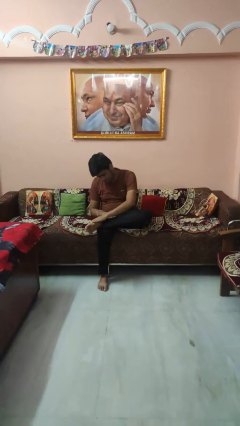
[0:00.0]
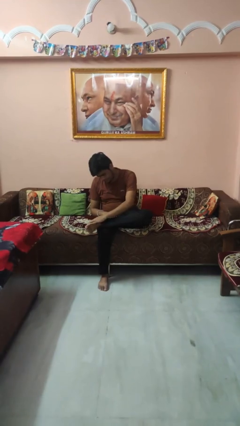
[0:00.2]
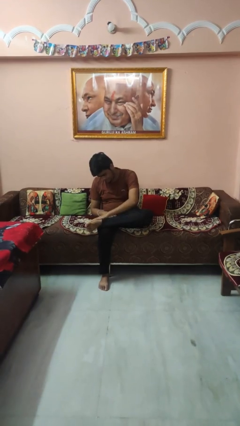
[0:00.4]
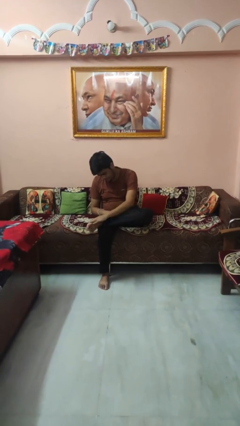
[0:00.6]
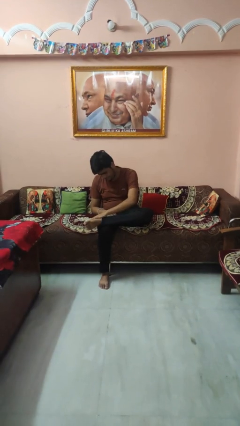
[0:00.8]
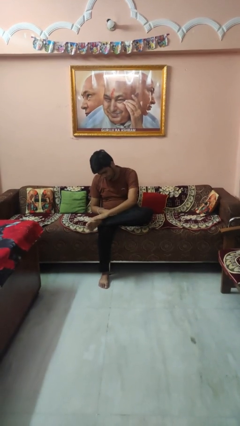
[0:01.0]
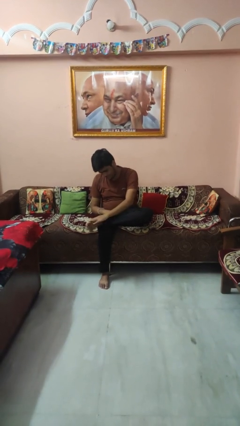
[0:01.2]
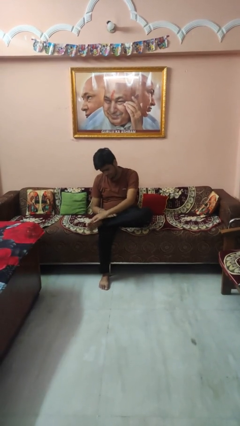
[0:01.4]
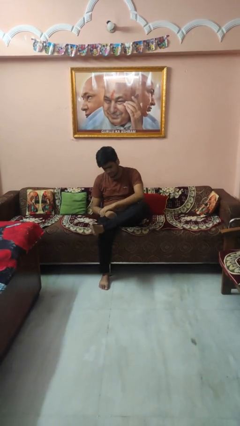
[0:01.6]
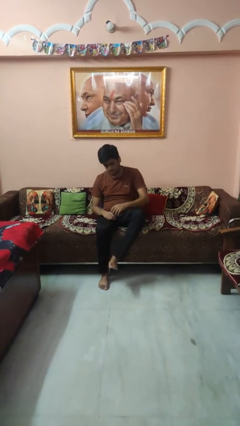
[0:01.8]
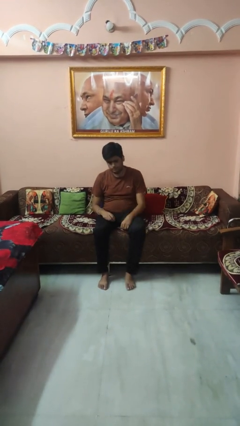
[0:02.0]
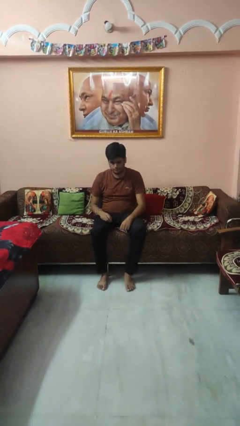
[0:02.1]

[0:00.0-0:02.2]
person rubs foot

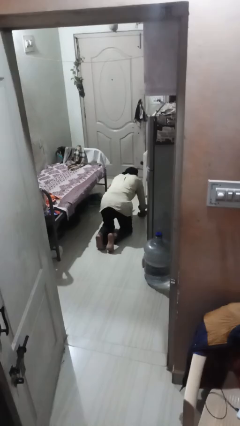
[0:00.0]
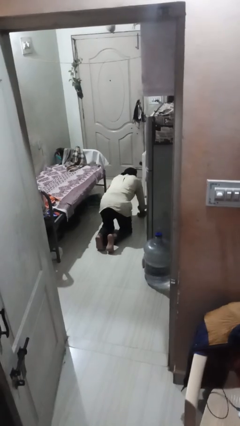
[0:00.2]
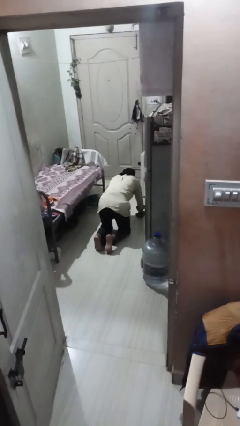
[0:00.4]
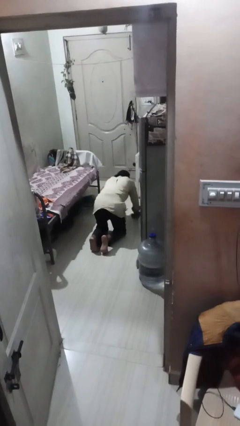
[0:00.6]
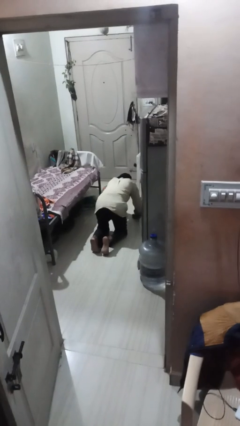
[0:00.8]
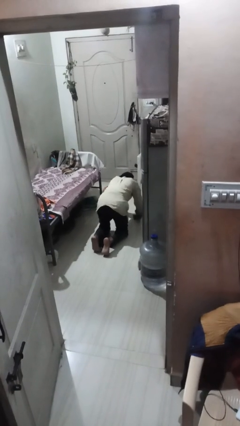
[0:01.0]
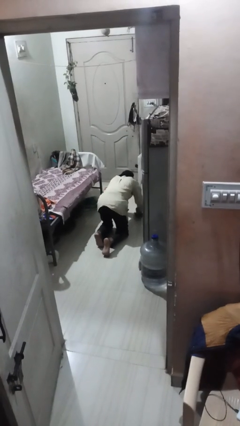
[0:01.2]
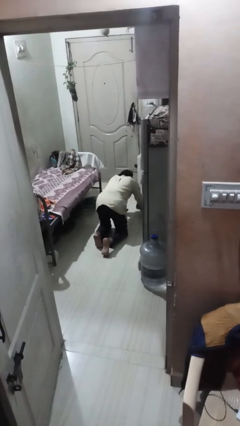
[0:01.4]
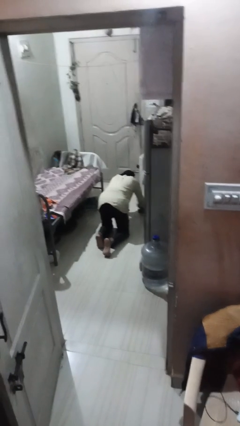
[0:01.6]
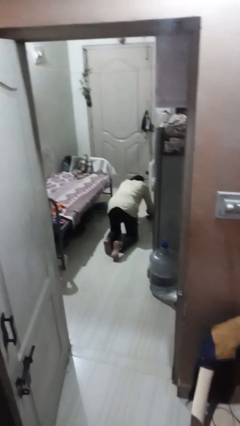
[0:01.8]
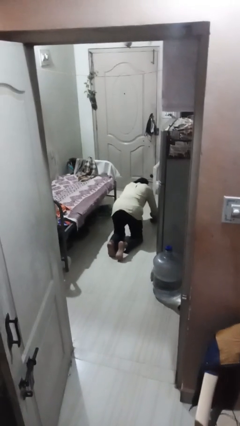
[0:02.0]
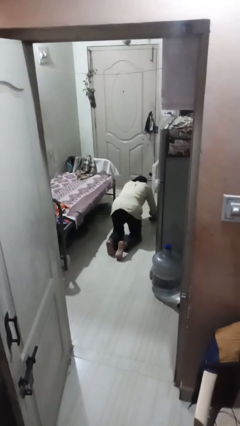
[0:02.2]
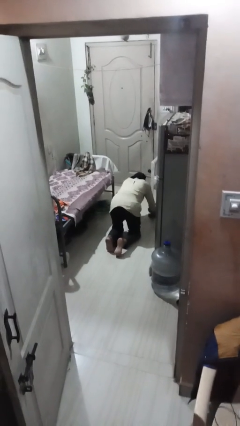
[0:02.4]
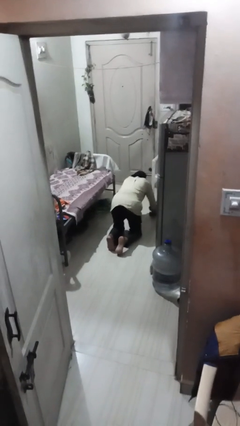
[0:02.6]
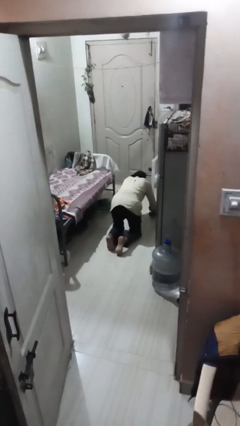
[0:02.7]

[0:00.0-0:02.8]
person crawls

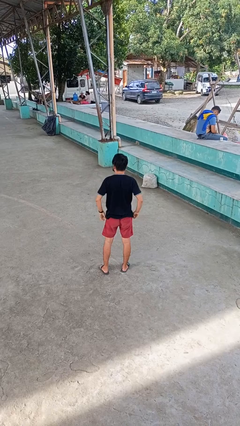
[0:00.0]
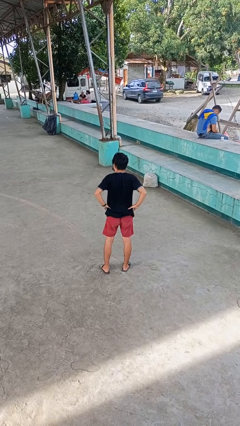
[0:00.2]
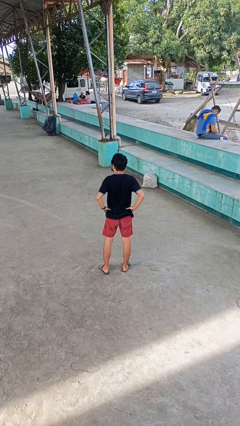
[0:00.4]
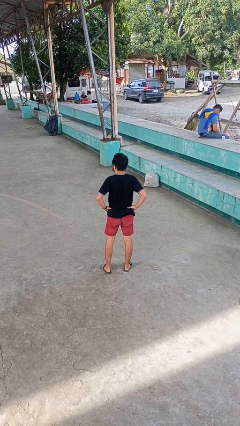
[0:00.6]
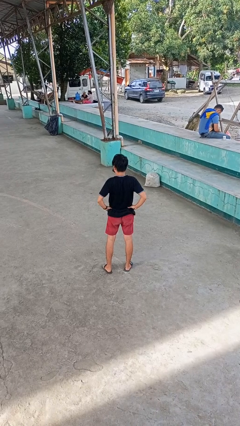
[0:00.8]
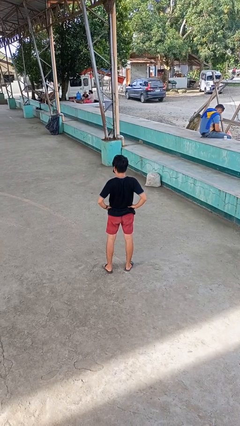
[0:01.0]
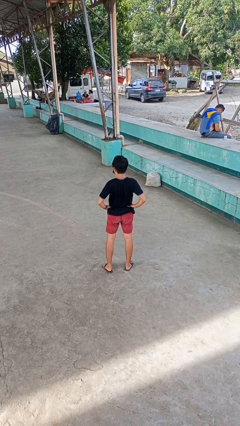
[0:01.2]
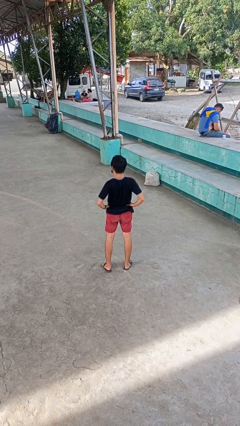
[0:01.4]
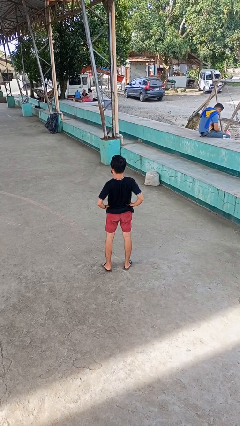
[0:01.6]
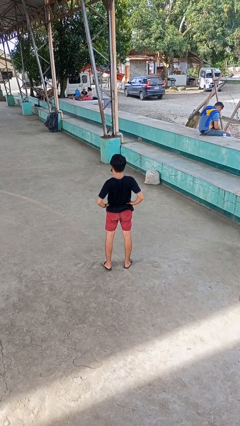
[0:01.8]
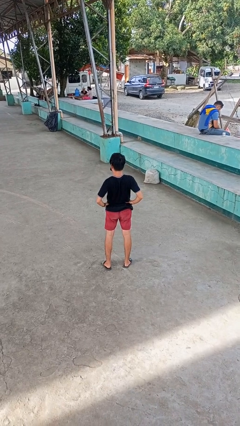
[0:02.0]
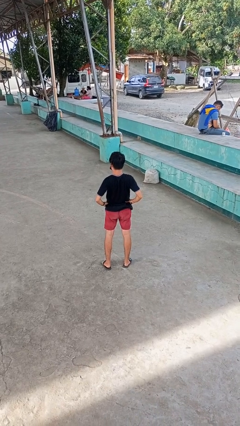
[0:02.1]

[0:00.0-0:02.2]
person stretches back

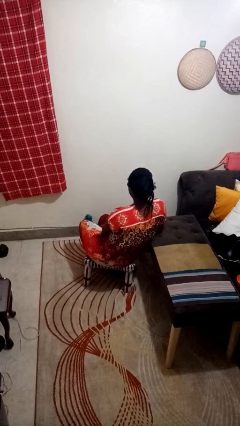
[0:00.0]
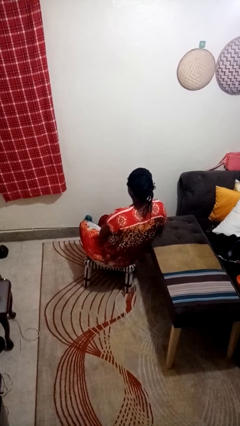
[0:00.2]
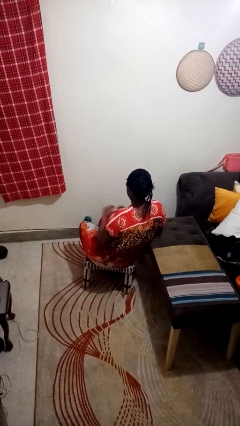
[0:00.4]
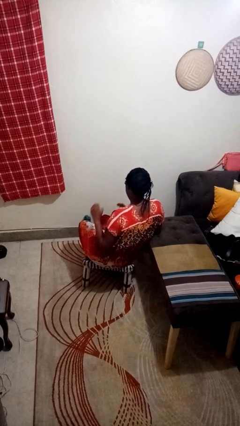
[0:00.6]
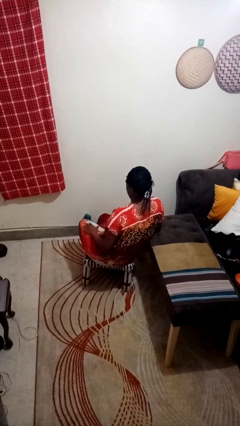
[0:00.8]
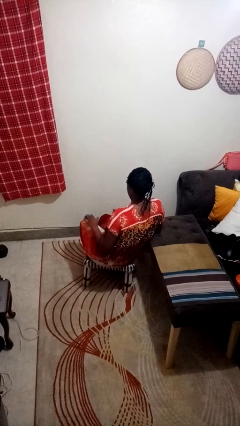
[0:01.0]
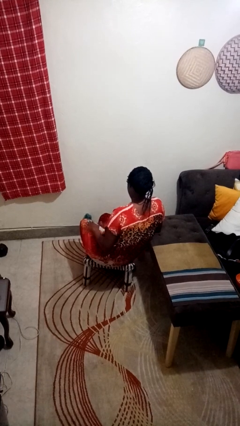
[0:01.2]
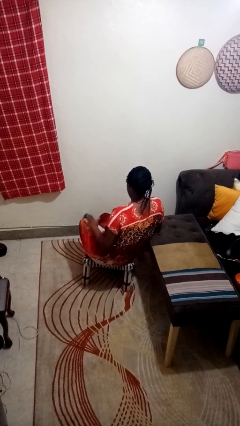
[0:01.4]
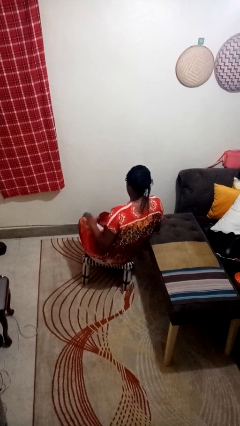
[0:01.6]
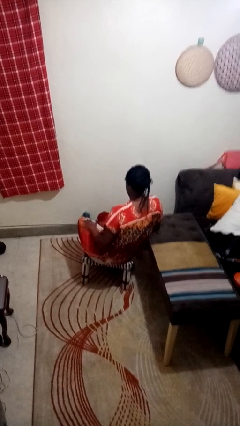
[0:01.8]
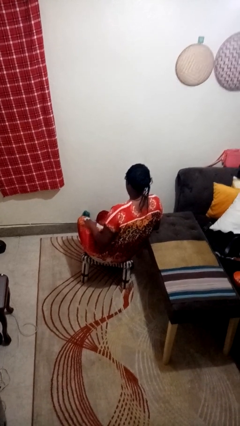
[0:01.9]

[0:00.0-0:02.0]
person slaps hands on thighs

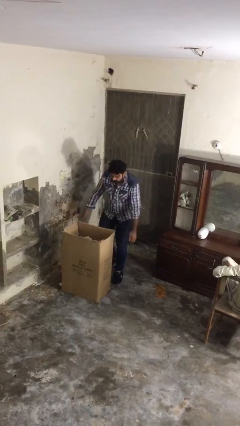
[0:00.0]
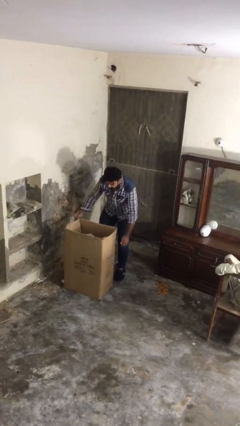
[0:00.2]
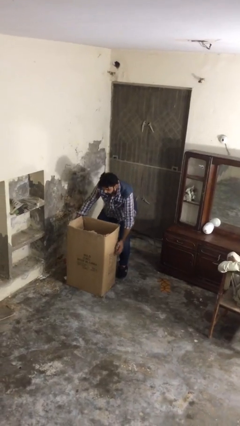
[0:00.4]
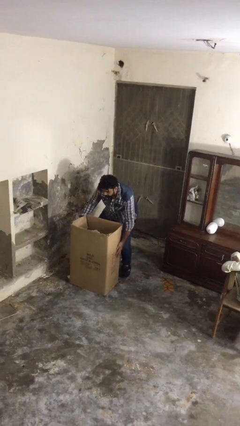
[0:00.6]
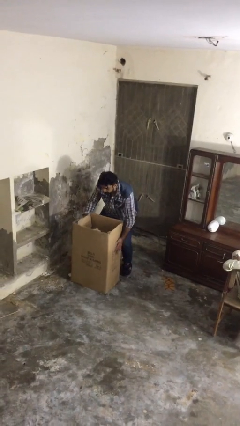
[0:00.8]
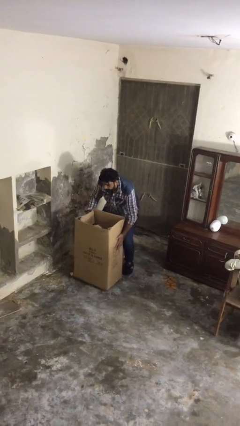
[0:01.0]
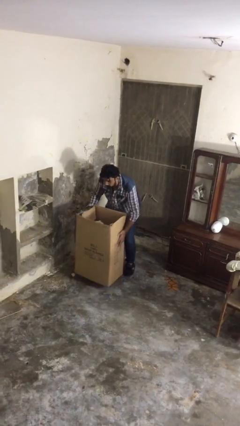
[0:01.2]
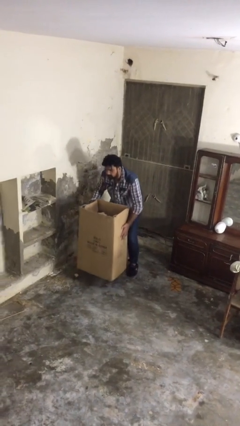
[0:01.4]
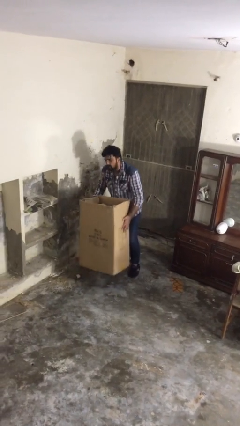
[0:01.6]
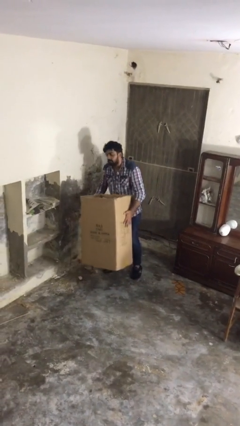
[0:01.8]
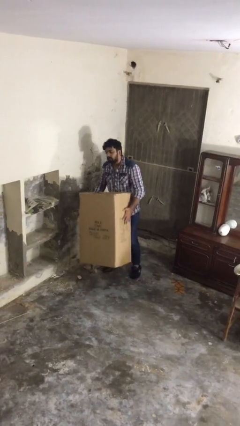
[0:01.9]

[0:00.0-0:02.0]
person picks up object from floor

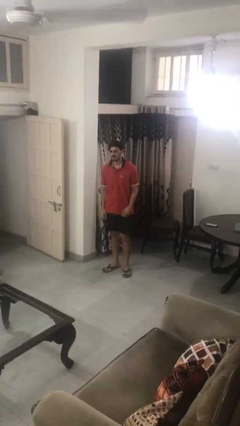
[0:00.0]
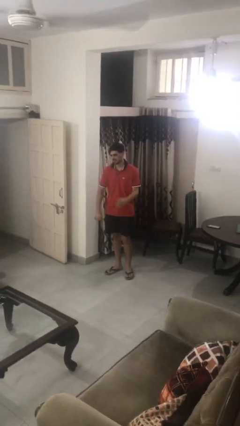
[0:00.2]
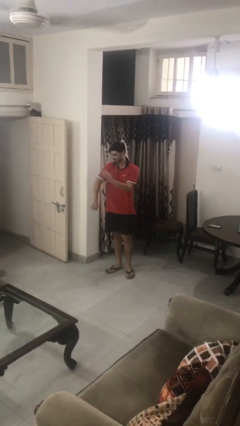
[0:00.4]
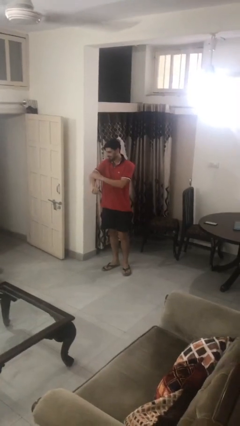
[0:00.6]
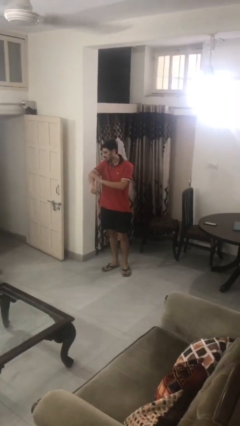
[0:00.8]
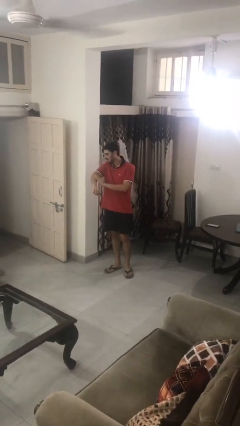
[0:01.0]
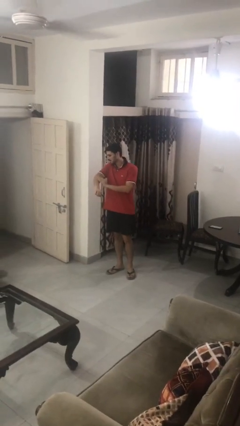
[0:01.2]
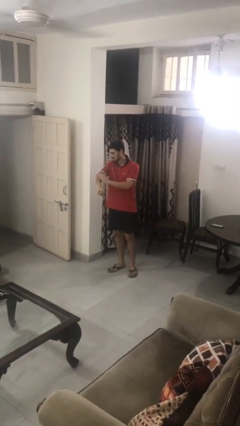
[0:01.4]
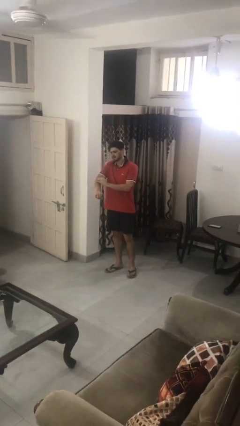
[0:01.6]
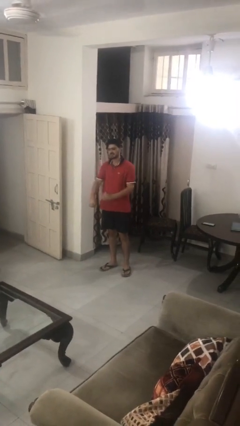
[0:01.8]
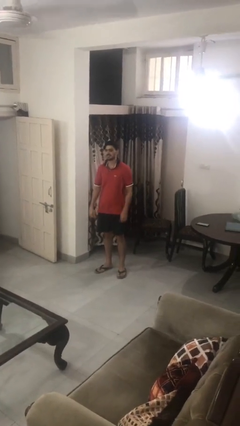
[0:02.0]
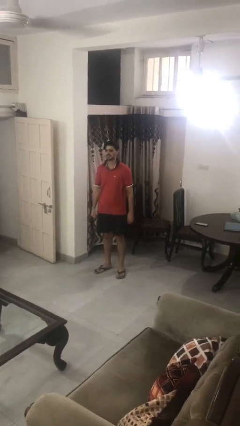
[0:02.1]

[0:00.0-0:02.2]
person swats bug

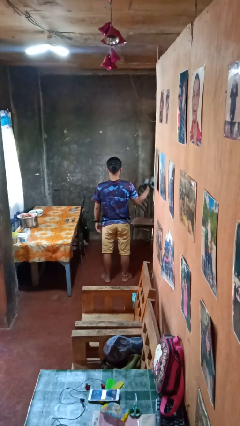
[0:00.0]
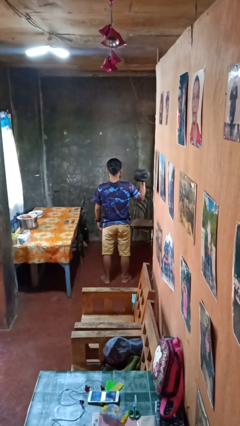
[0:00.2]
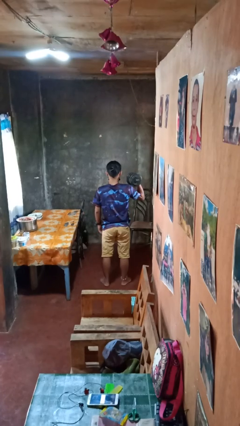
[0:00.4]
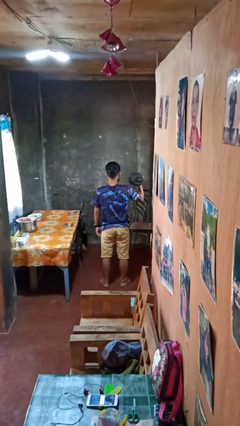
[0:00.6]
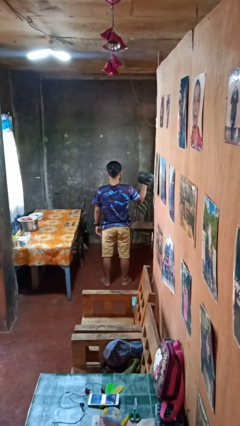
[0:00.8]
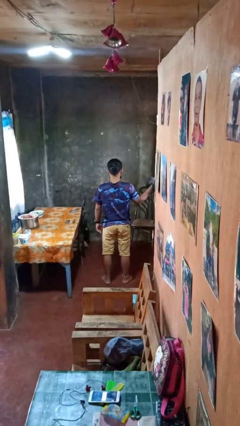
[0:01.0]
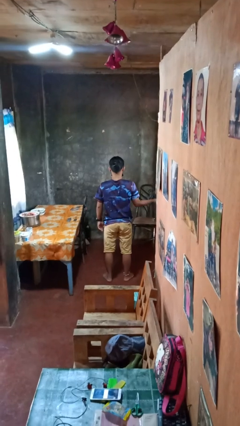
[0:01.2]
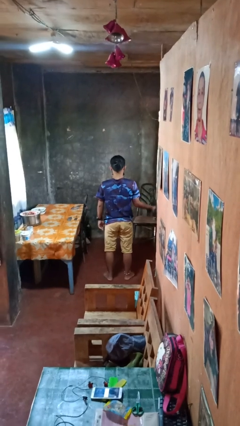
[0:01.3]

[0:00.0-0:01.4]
person lifts dumbbells

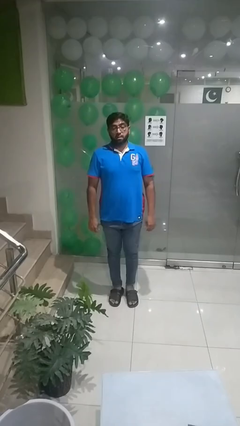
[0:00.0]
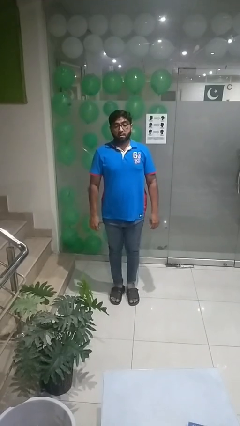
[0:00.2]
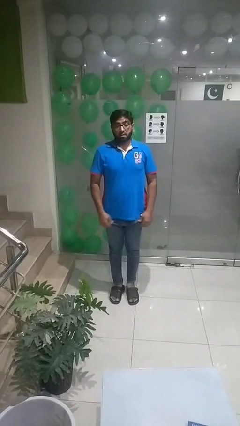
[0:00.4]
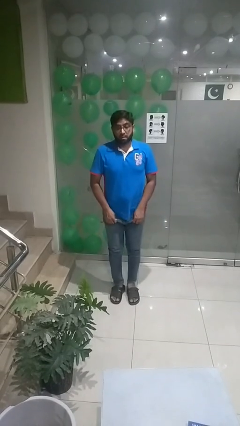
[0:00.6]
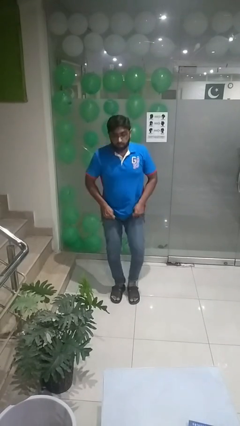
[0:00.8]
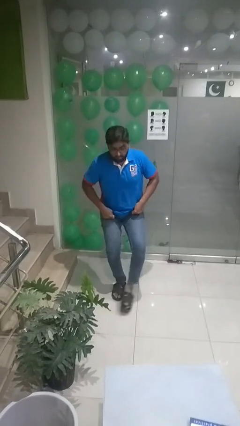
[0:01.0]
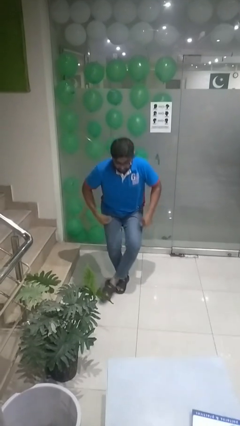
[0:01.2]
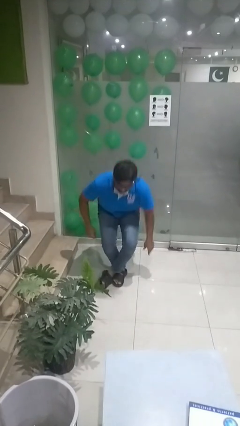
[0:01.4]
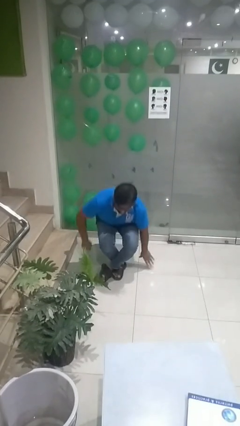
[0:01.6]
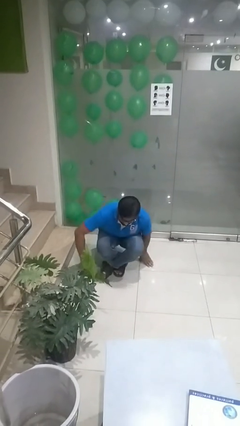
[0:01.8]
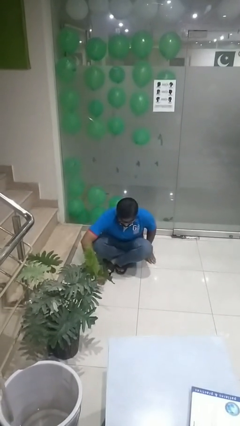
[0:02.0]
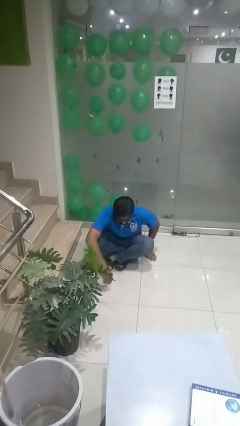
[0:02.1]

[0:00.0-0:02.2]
person sits crisscross
